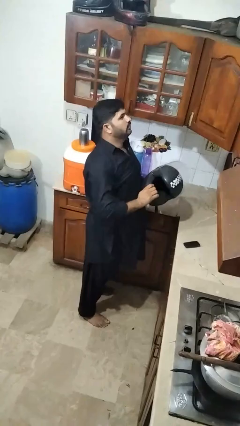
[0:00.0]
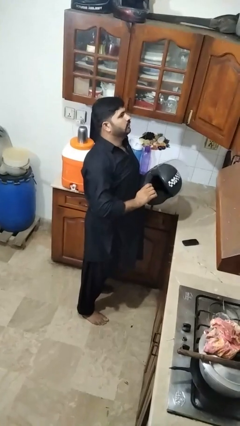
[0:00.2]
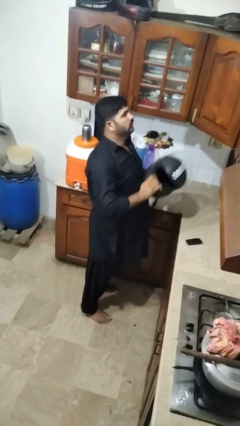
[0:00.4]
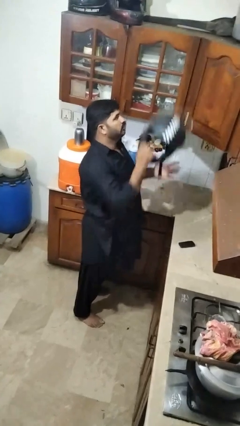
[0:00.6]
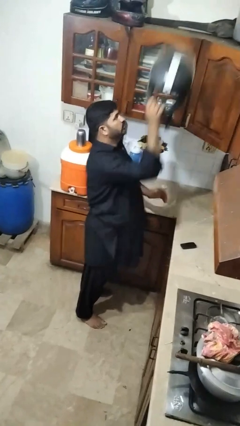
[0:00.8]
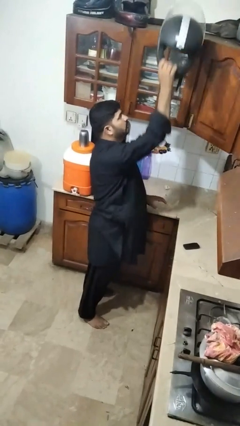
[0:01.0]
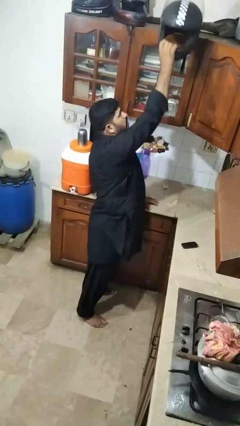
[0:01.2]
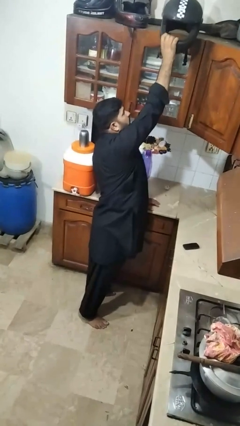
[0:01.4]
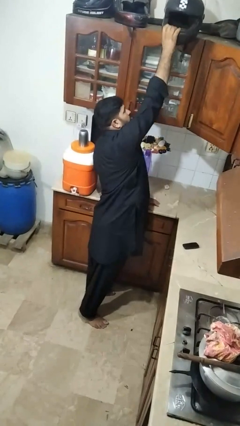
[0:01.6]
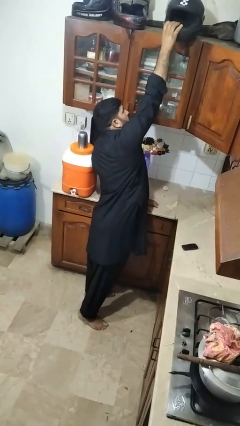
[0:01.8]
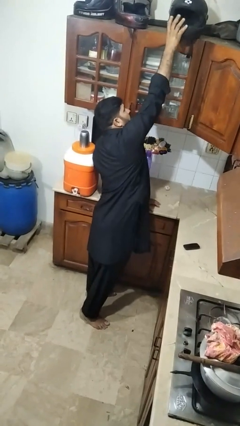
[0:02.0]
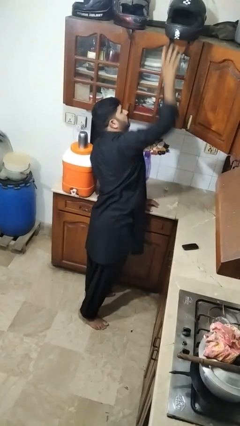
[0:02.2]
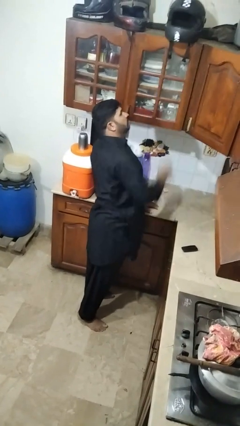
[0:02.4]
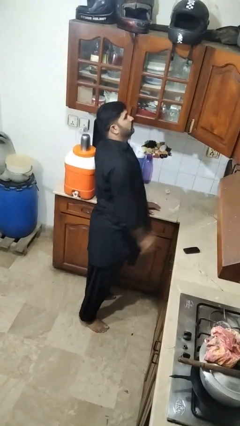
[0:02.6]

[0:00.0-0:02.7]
person puts down object on shelf

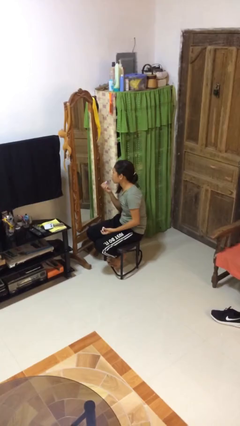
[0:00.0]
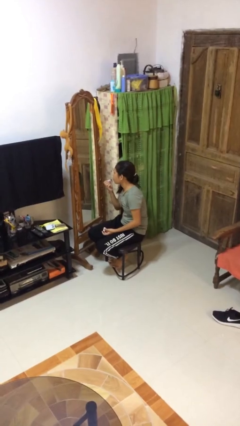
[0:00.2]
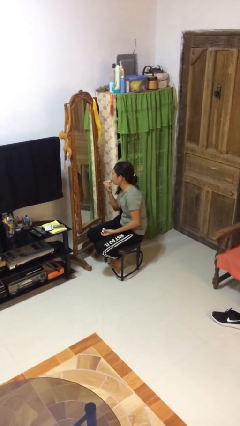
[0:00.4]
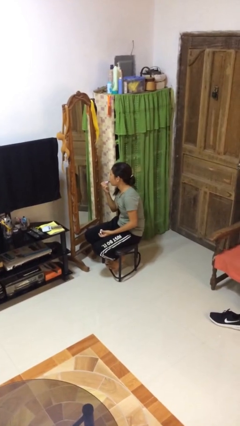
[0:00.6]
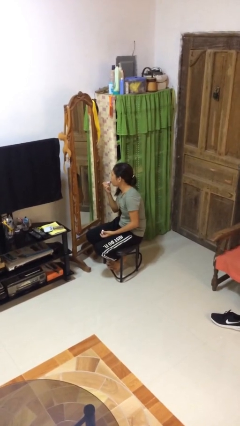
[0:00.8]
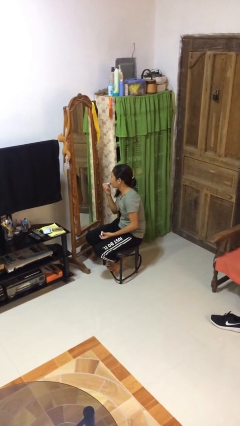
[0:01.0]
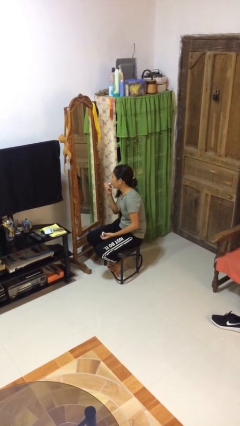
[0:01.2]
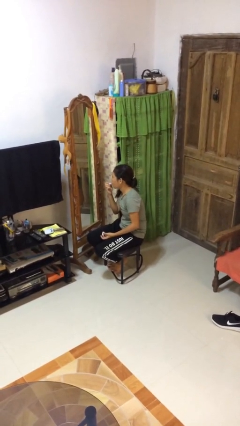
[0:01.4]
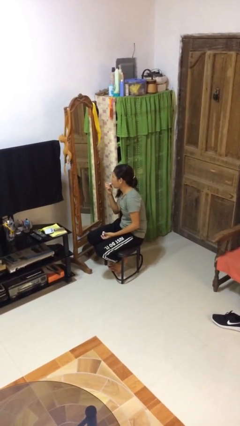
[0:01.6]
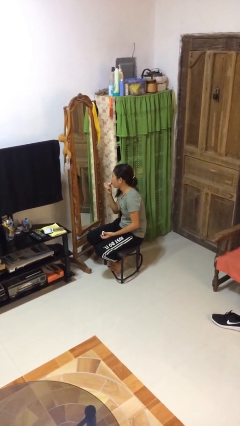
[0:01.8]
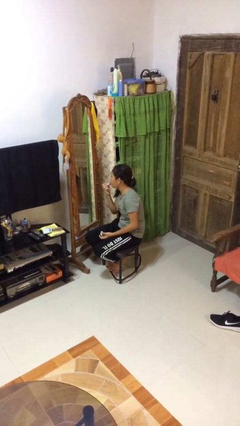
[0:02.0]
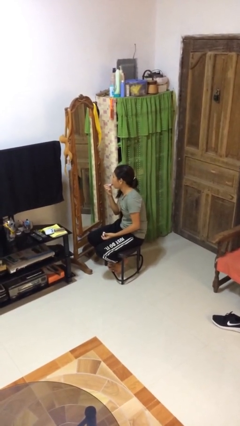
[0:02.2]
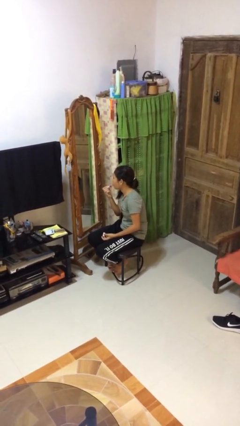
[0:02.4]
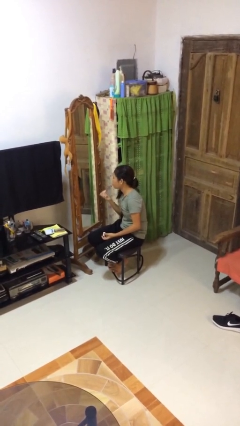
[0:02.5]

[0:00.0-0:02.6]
person applies lip makeup

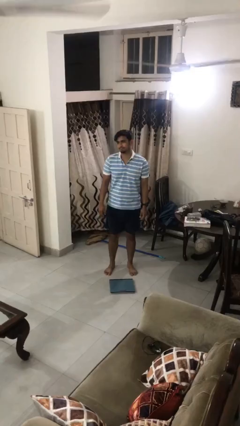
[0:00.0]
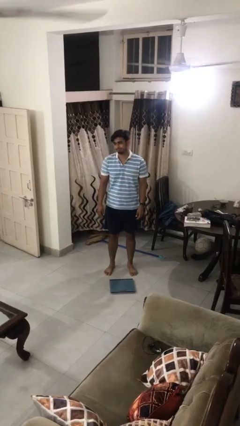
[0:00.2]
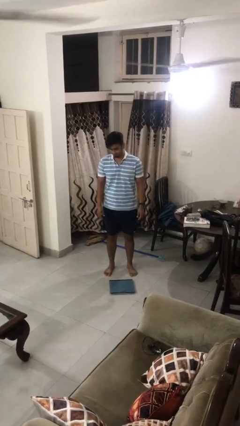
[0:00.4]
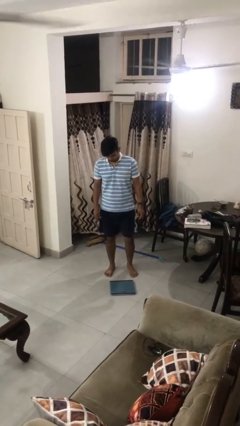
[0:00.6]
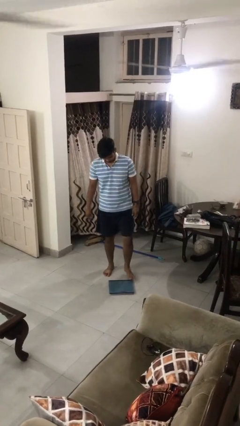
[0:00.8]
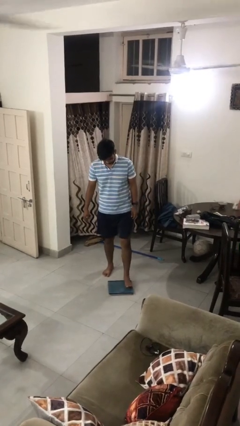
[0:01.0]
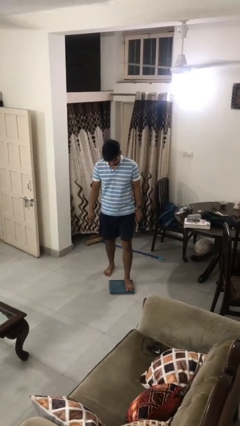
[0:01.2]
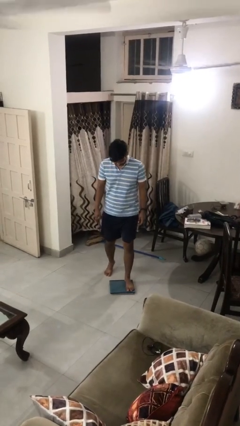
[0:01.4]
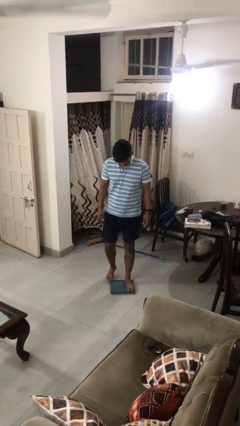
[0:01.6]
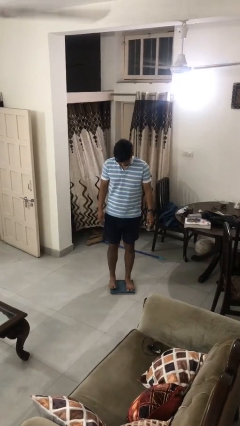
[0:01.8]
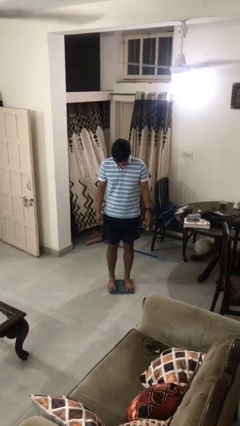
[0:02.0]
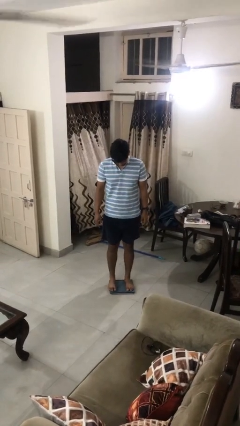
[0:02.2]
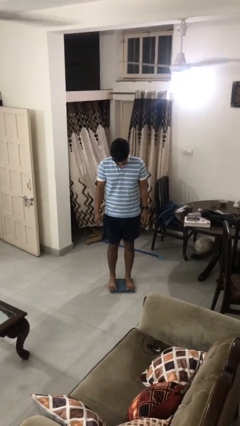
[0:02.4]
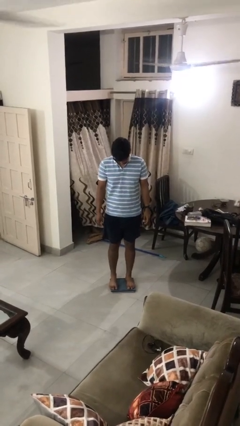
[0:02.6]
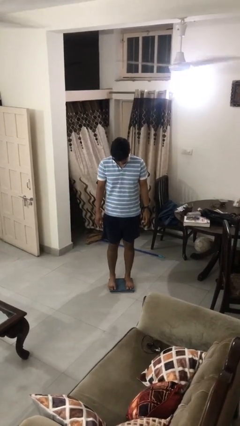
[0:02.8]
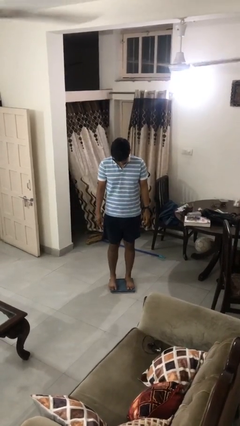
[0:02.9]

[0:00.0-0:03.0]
person uses bodyweight scale

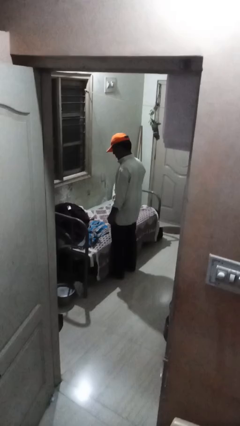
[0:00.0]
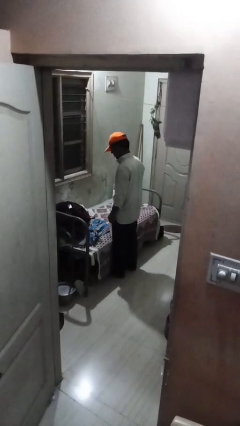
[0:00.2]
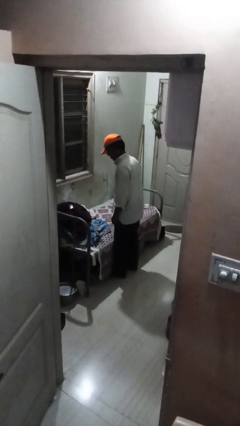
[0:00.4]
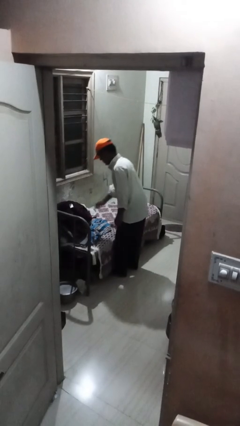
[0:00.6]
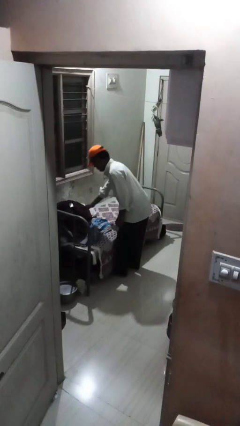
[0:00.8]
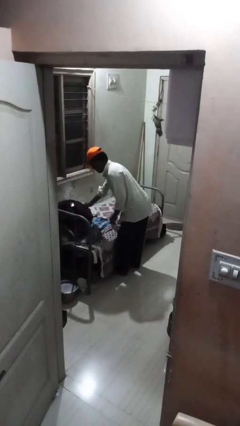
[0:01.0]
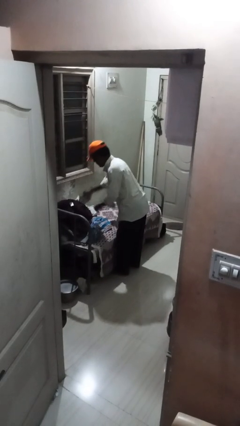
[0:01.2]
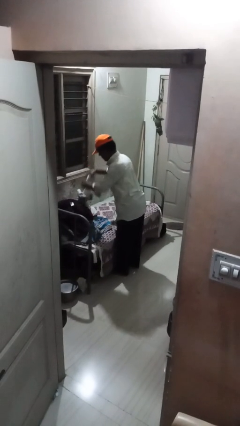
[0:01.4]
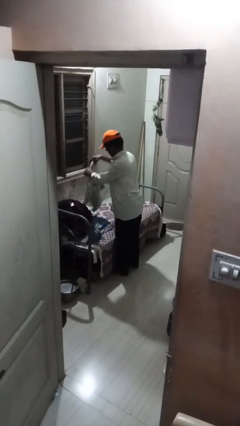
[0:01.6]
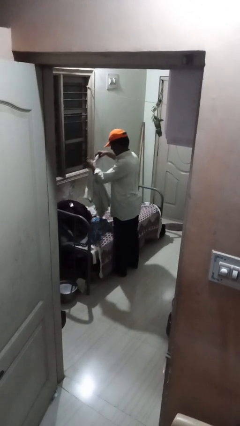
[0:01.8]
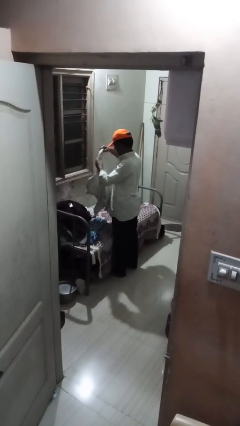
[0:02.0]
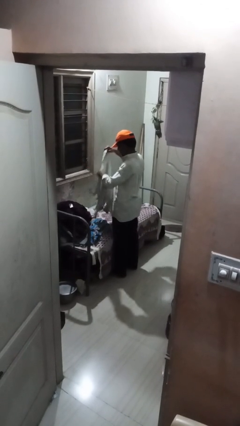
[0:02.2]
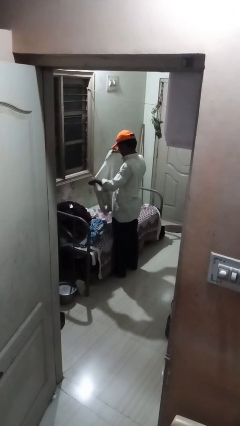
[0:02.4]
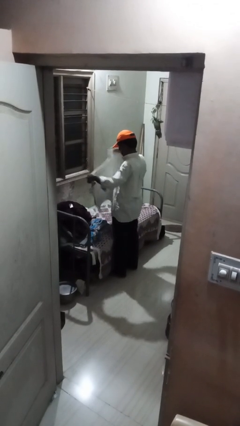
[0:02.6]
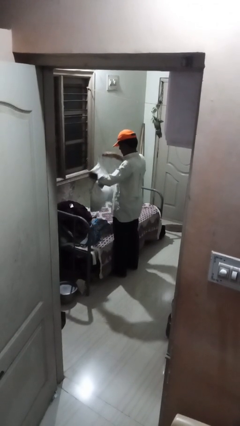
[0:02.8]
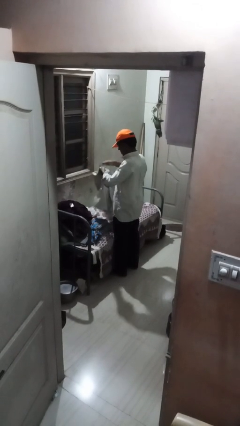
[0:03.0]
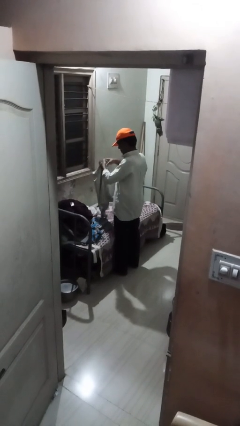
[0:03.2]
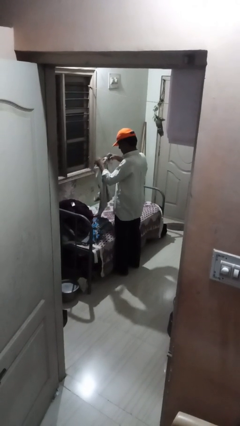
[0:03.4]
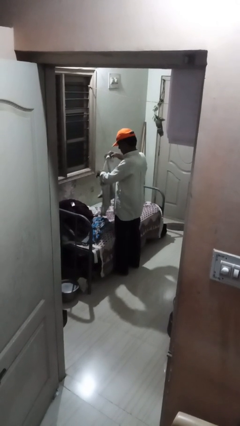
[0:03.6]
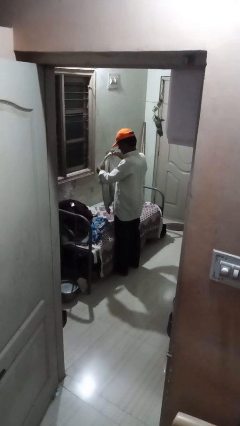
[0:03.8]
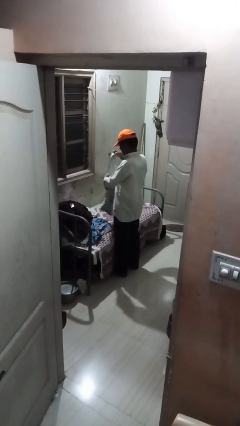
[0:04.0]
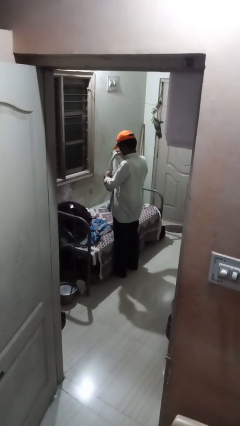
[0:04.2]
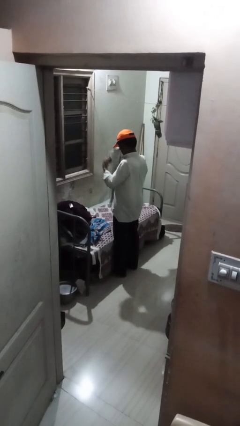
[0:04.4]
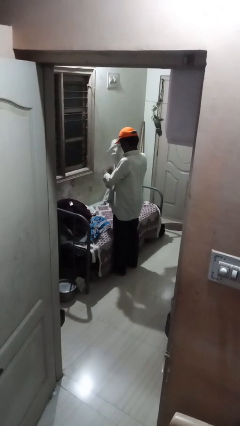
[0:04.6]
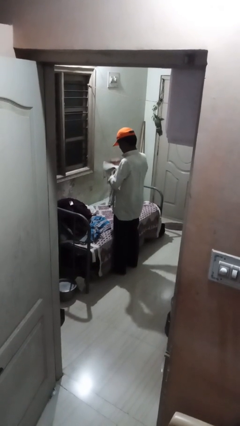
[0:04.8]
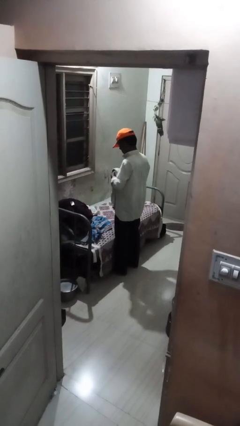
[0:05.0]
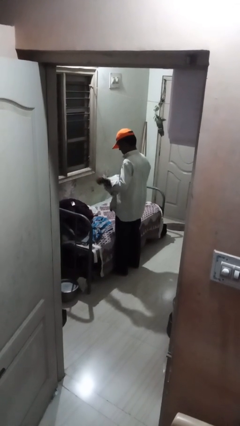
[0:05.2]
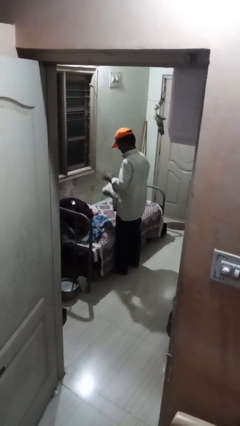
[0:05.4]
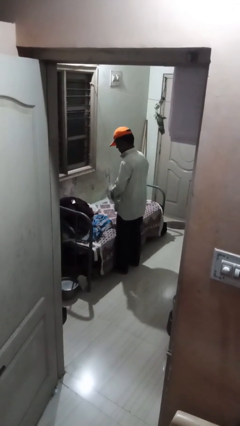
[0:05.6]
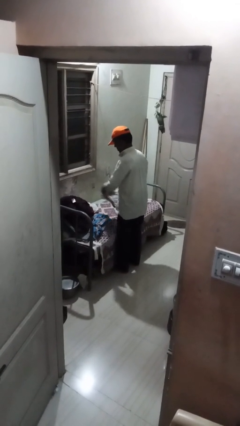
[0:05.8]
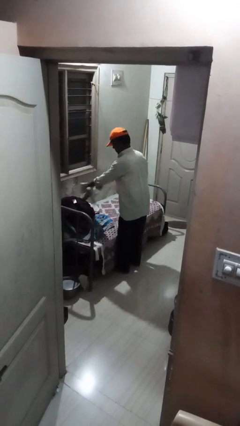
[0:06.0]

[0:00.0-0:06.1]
person folds shirt

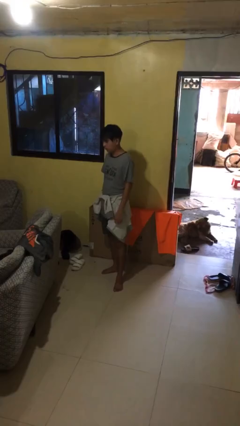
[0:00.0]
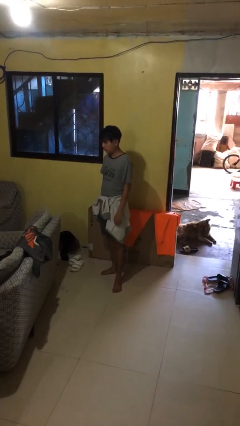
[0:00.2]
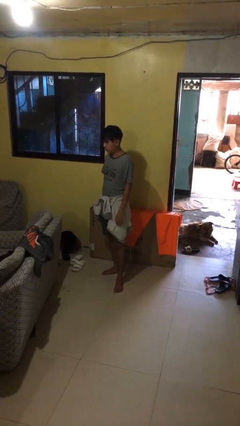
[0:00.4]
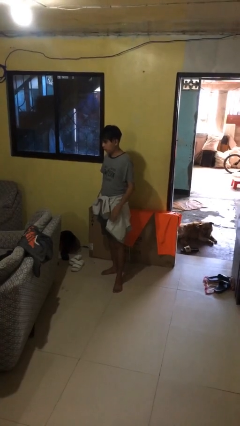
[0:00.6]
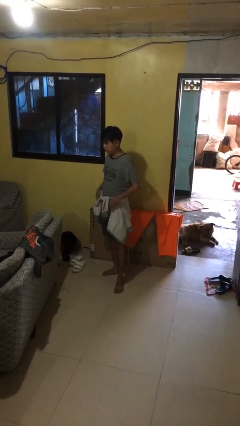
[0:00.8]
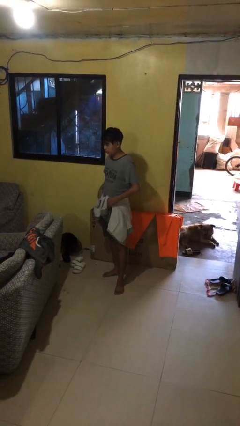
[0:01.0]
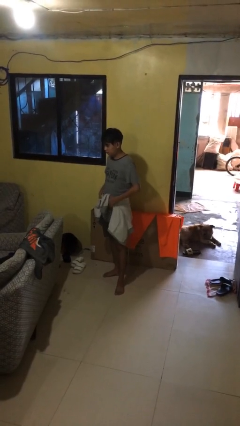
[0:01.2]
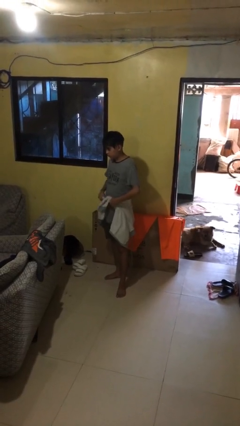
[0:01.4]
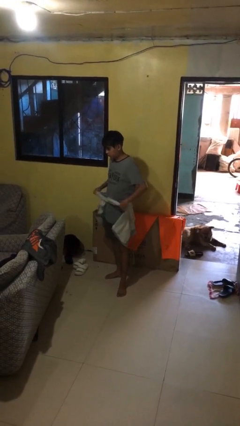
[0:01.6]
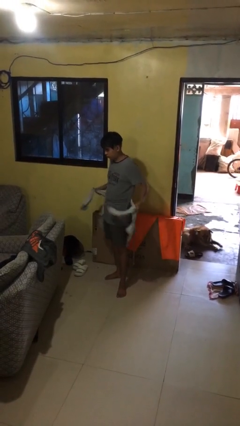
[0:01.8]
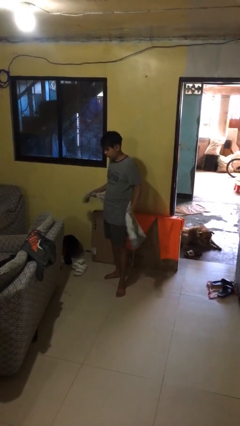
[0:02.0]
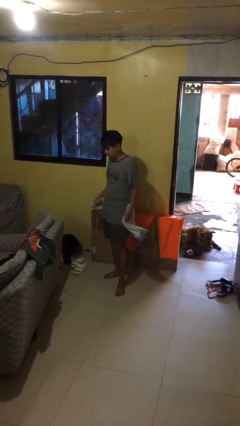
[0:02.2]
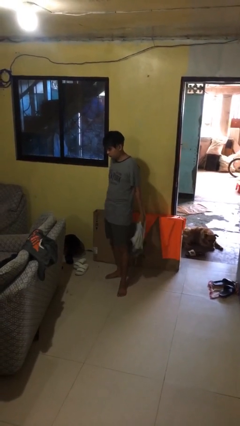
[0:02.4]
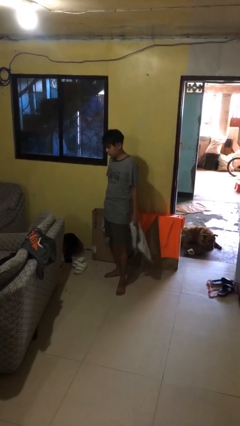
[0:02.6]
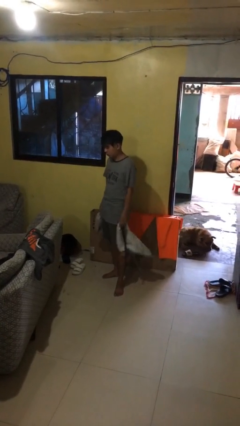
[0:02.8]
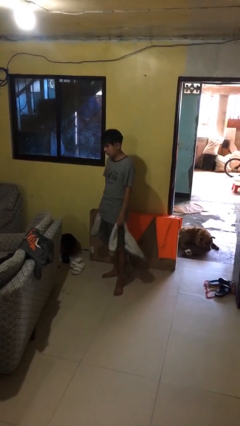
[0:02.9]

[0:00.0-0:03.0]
person unties jacket around waist

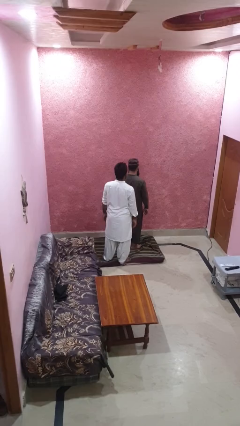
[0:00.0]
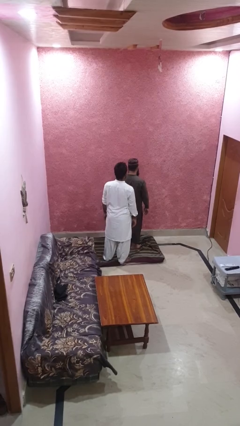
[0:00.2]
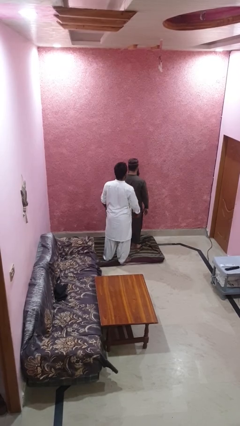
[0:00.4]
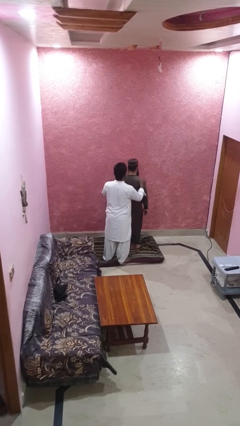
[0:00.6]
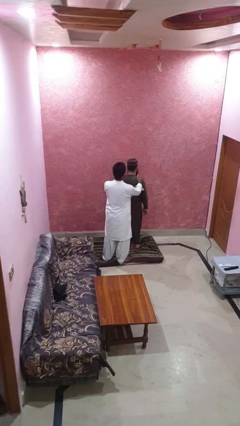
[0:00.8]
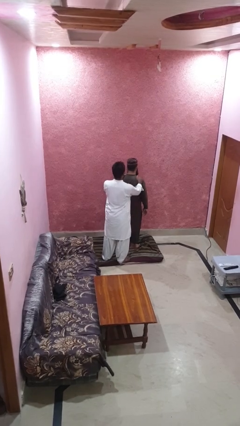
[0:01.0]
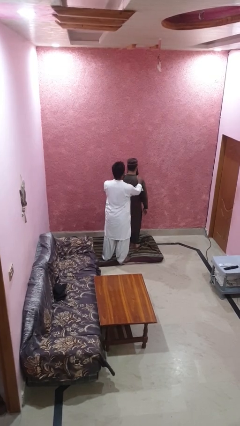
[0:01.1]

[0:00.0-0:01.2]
person grabs person by shoulder
